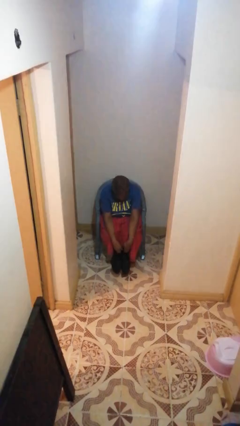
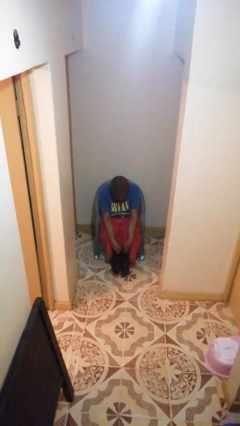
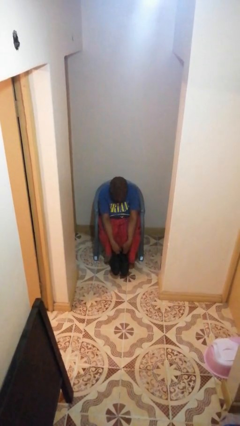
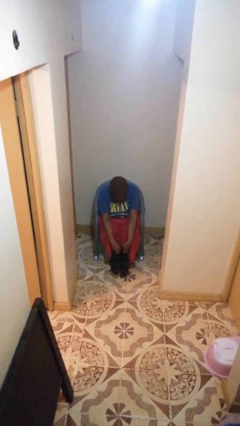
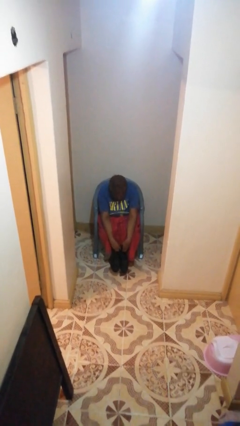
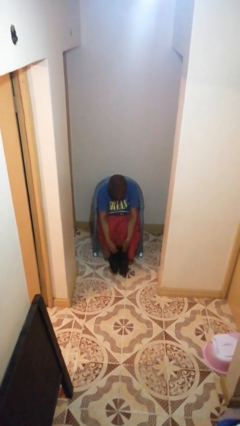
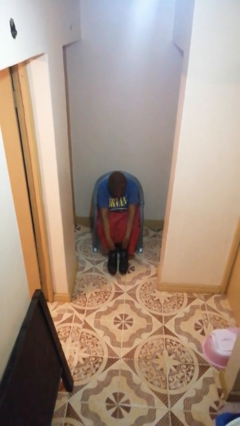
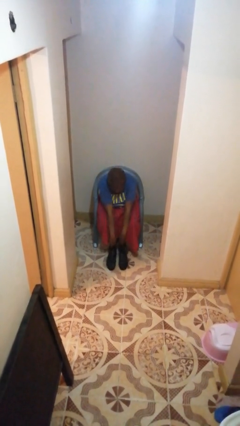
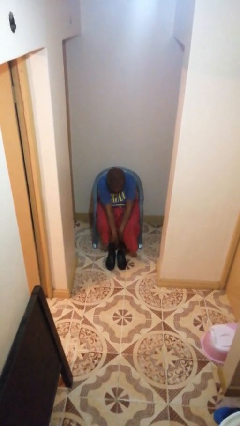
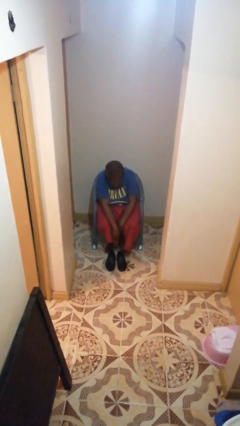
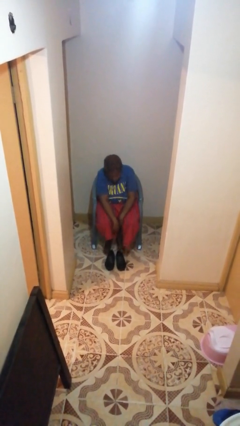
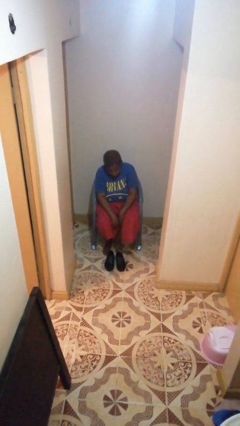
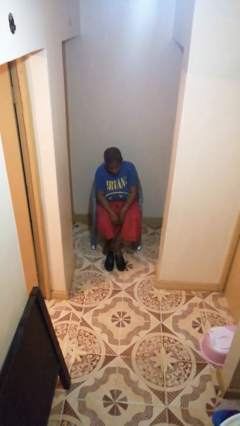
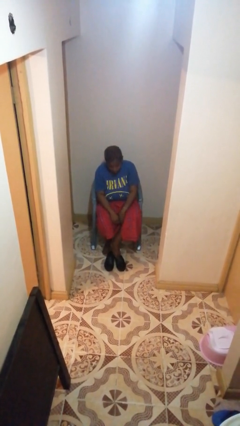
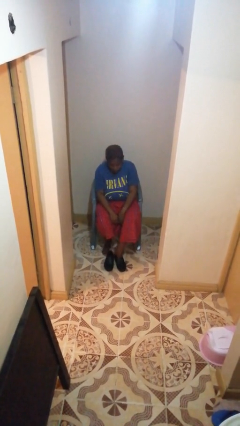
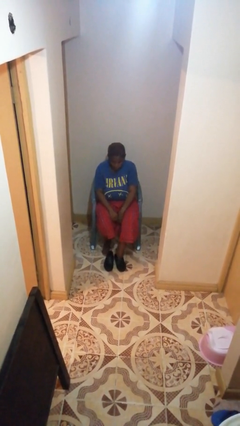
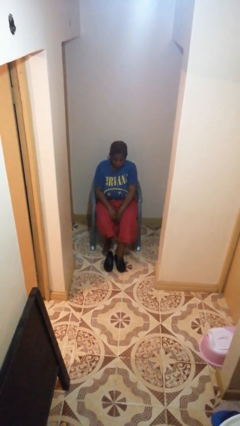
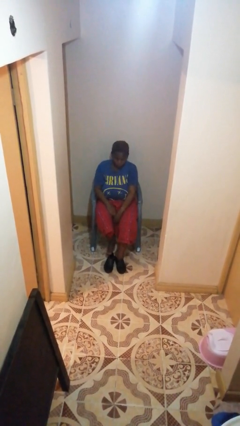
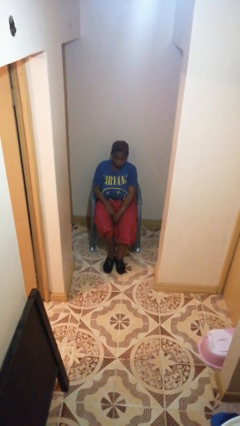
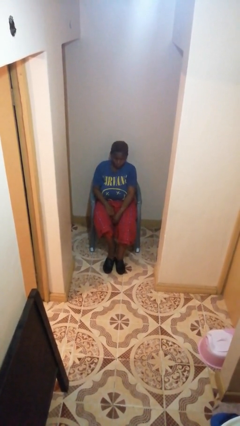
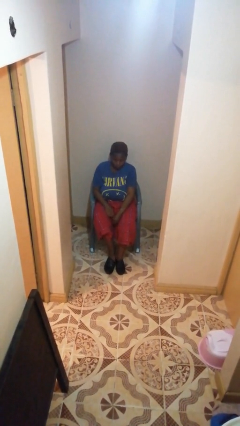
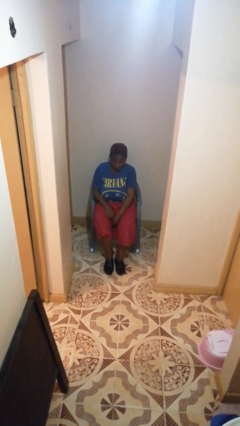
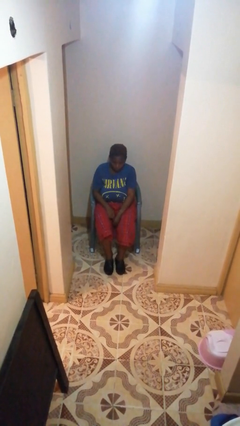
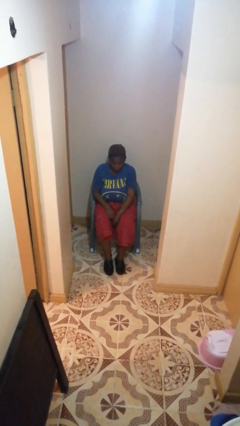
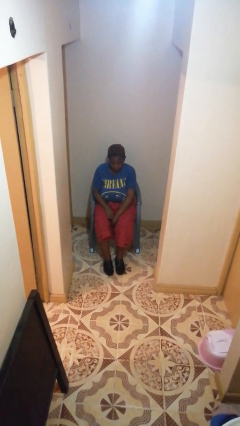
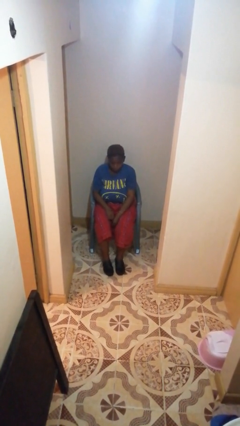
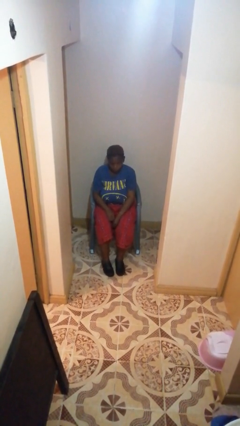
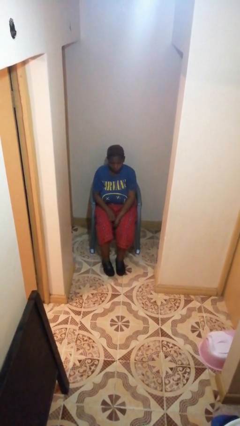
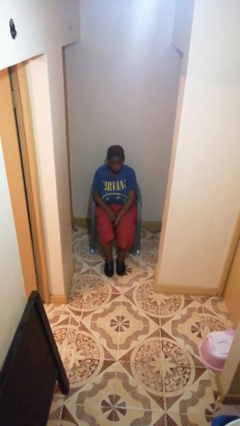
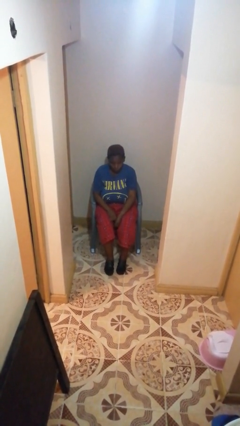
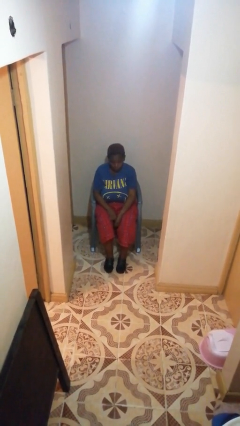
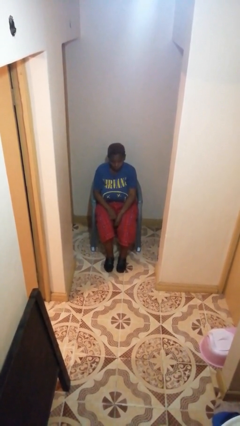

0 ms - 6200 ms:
person puts on shoes

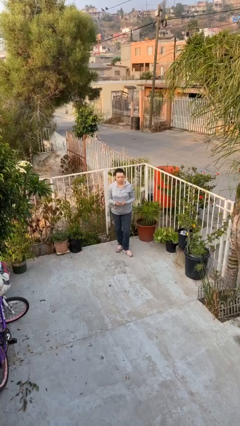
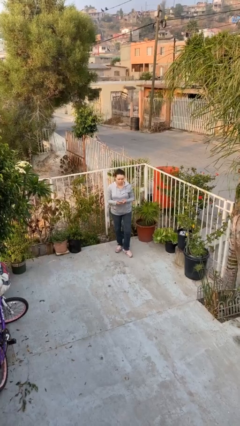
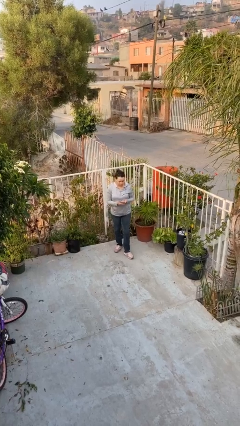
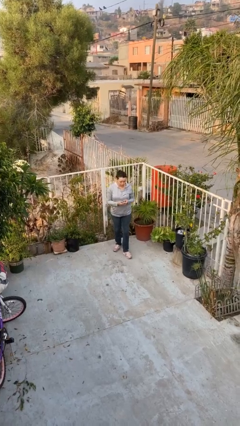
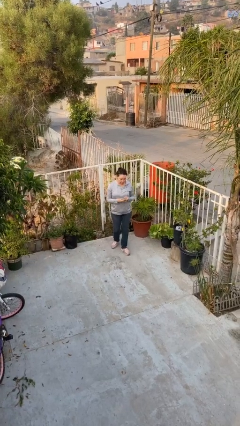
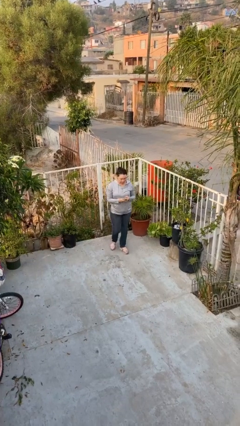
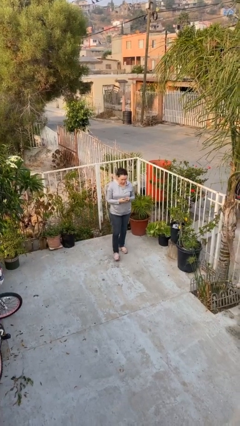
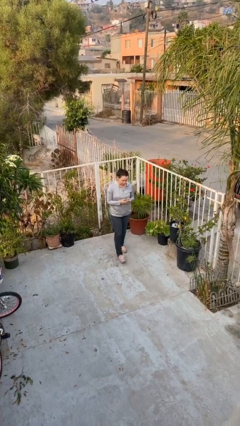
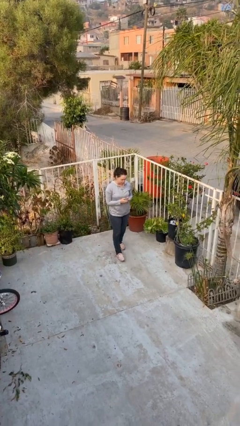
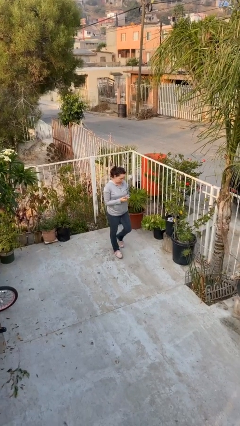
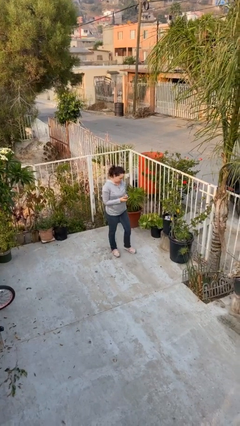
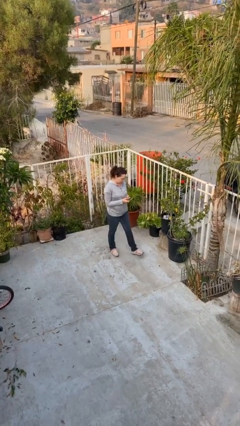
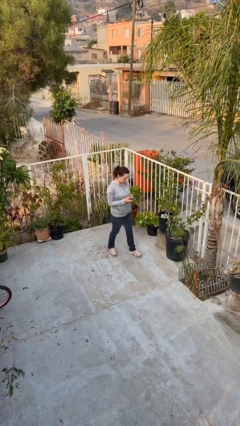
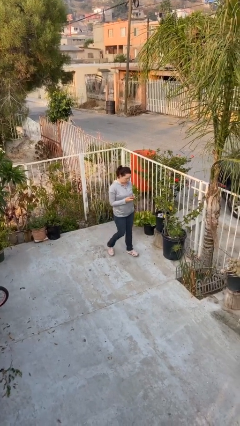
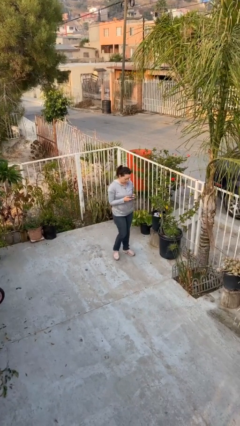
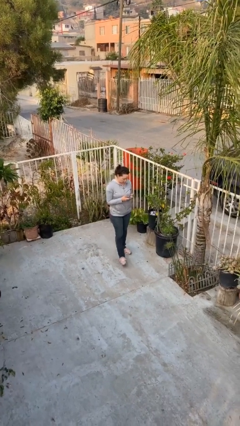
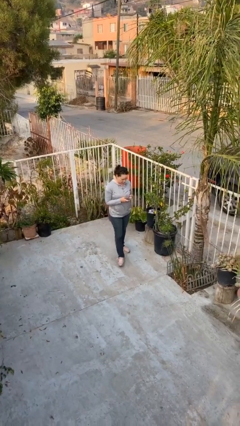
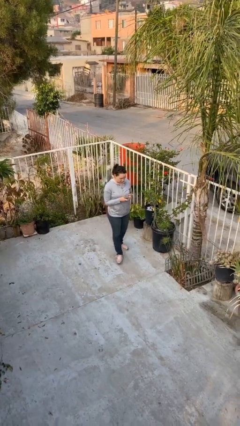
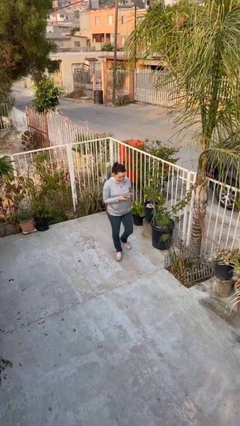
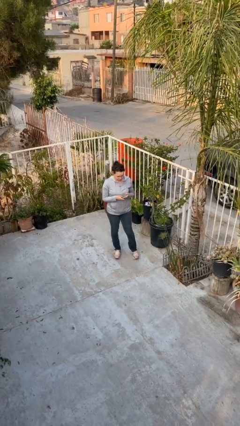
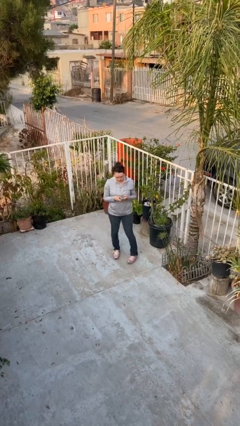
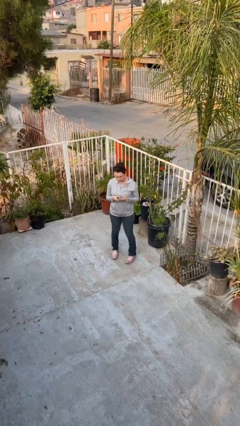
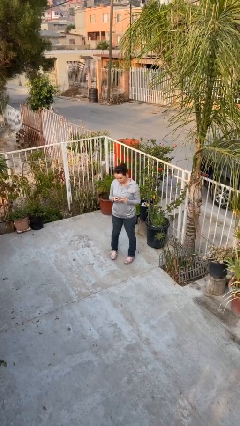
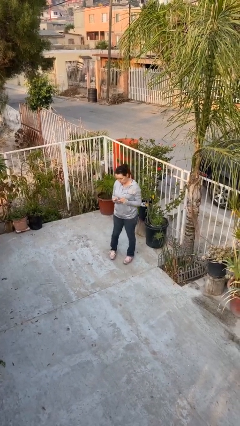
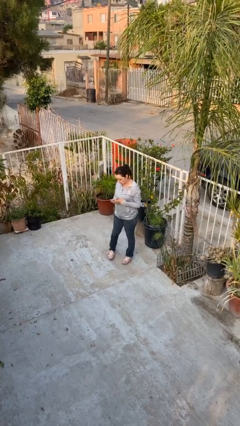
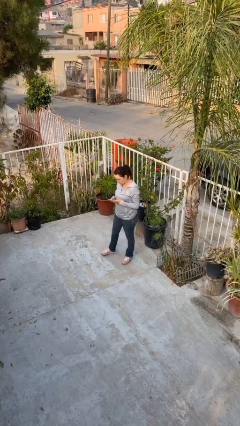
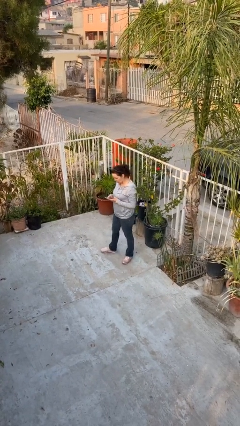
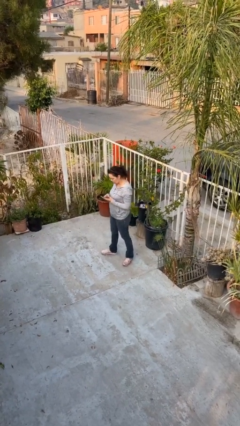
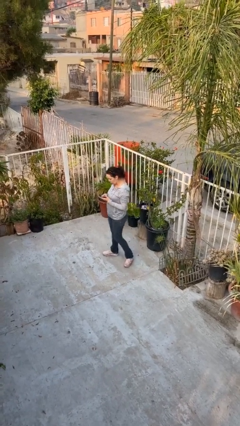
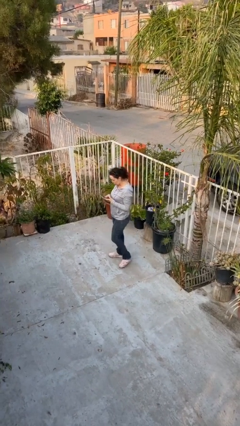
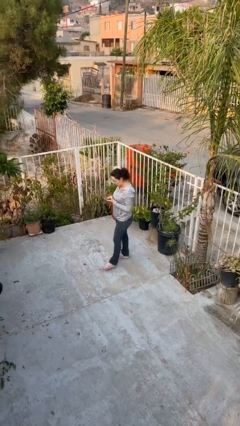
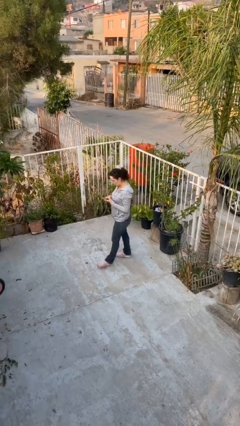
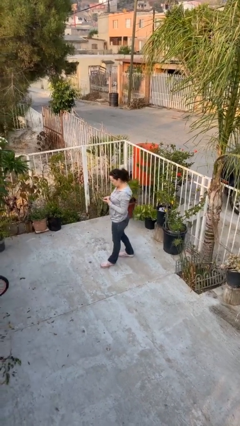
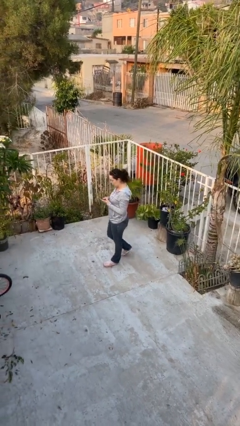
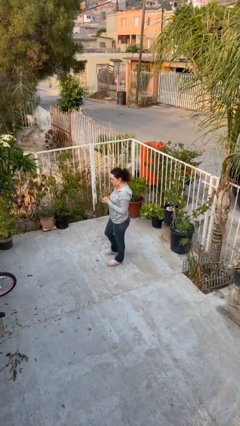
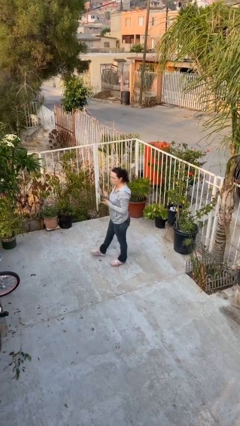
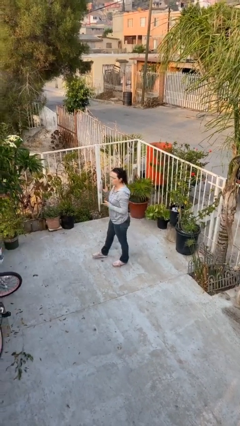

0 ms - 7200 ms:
person texts on phone

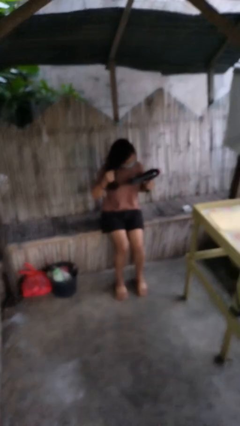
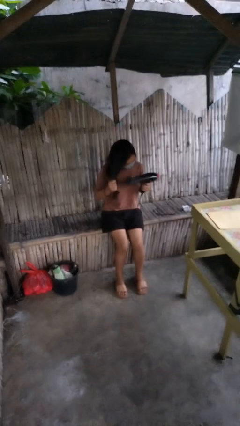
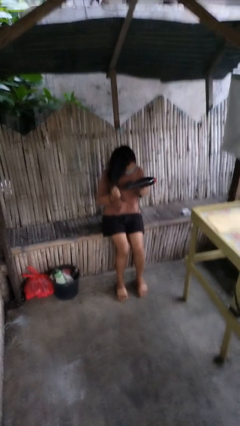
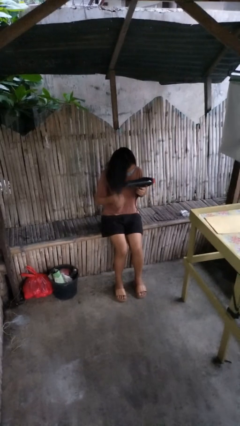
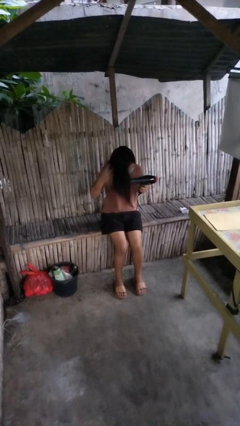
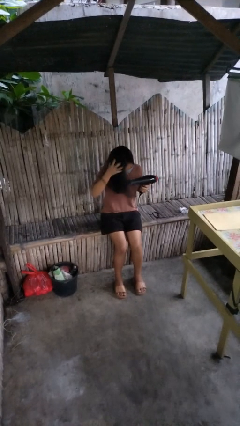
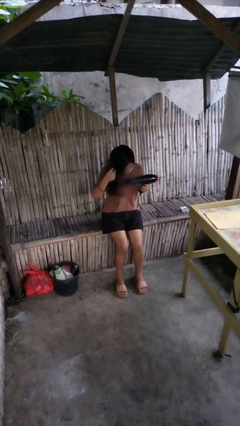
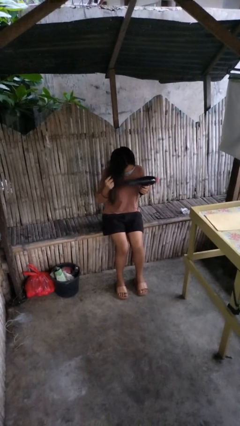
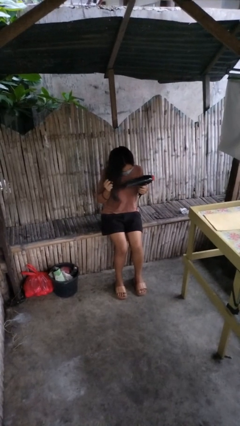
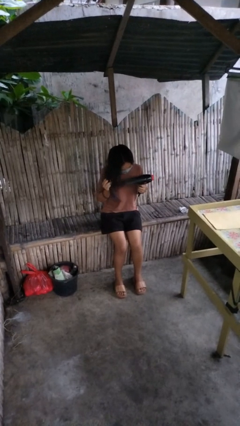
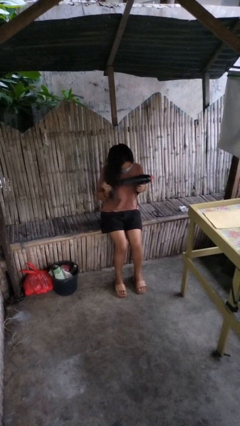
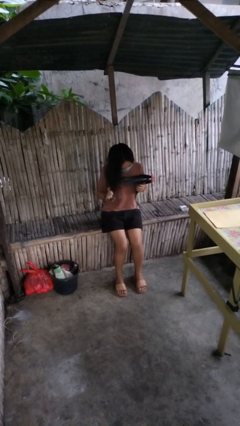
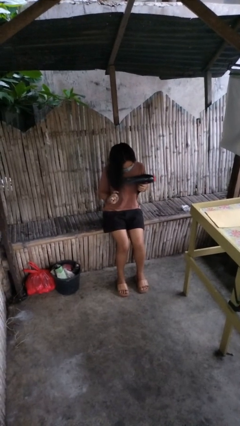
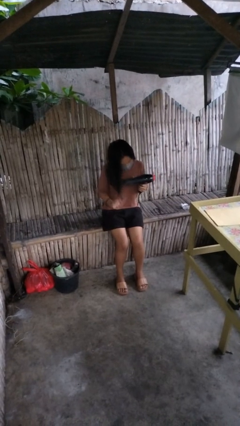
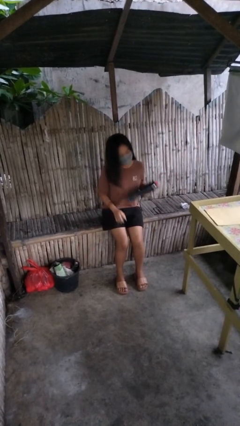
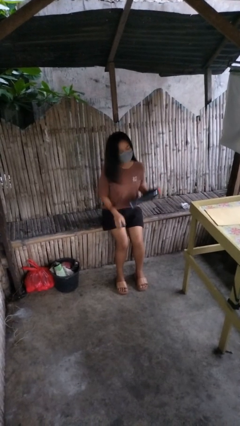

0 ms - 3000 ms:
person dries hair with hairdryer

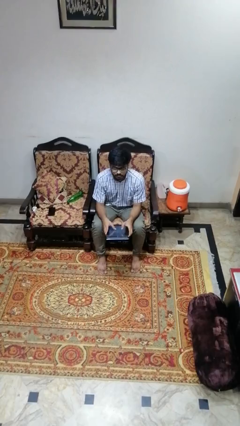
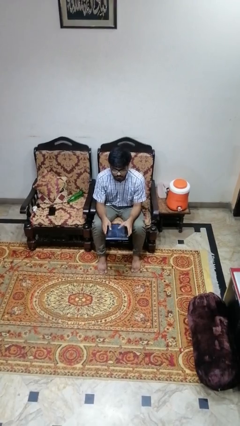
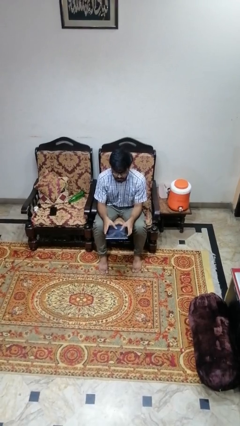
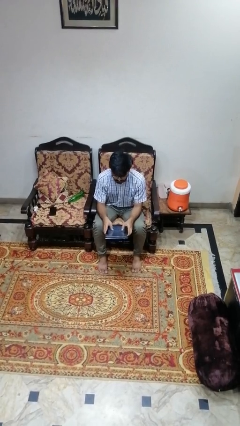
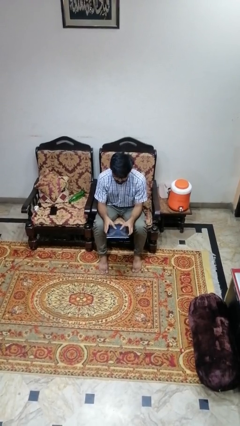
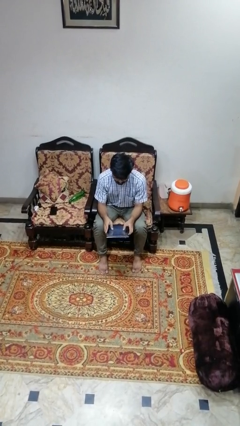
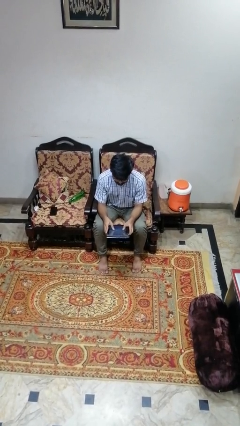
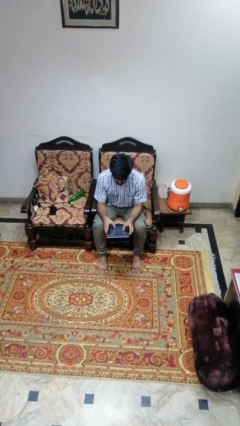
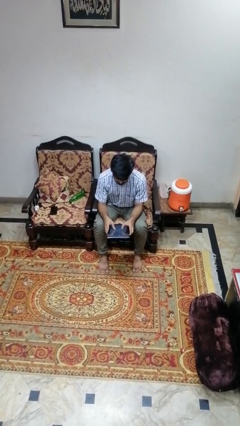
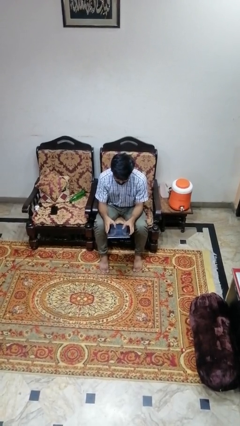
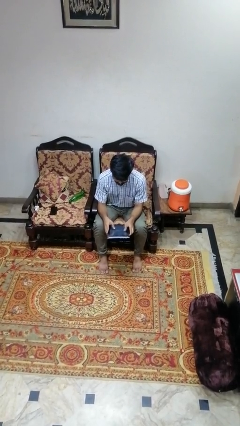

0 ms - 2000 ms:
person interacts with tablet
